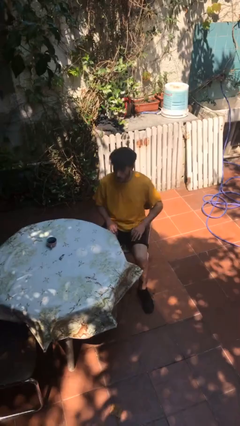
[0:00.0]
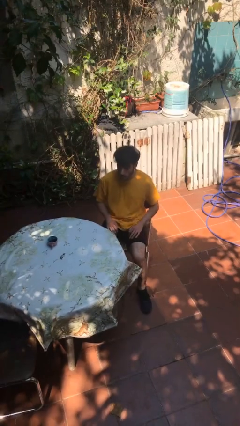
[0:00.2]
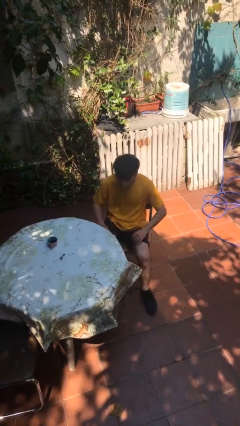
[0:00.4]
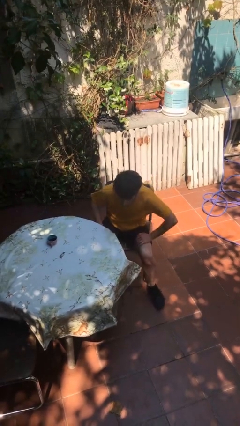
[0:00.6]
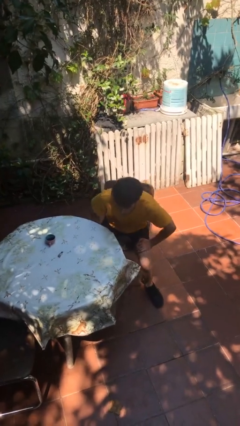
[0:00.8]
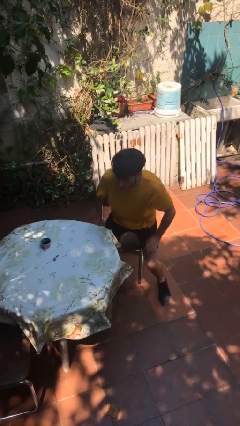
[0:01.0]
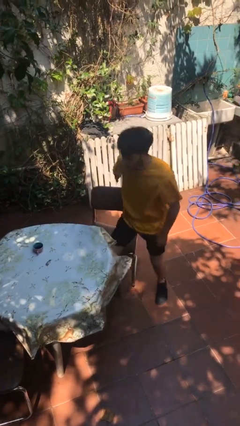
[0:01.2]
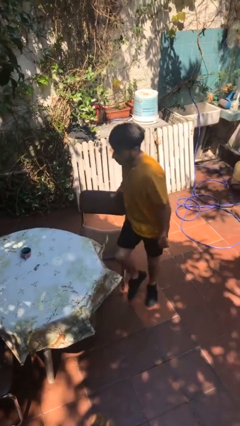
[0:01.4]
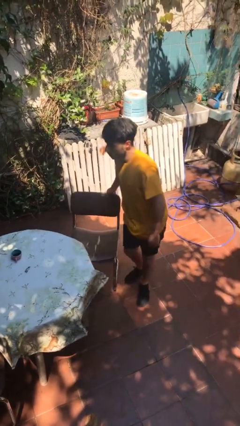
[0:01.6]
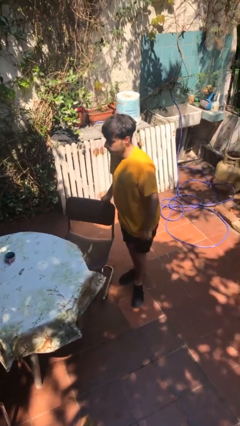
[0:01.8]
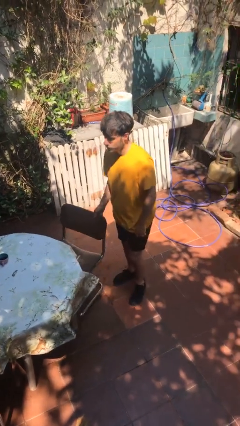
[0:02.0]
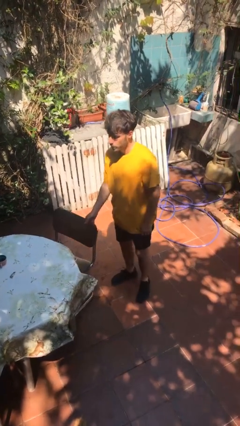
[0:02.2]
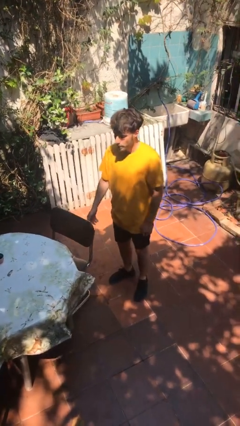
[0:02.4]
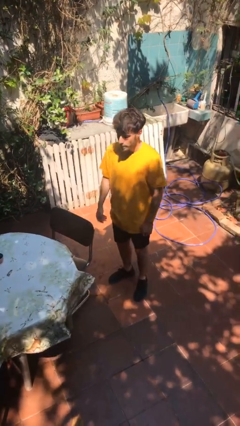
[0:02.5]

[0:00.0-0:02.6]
person stands up

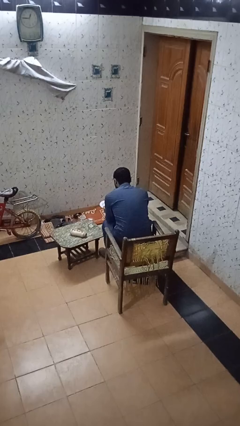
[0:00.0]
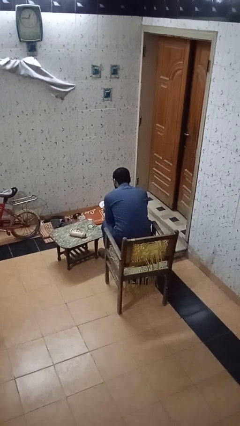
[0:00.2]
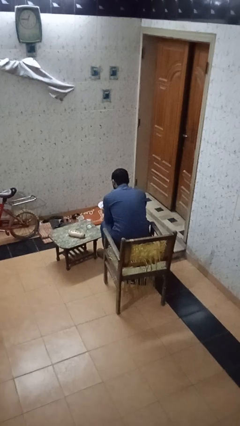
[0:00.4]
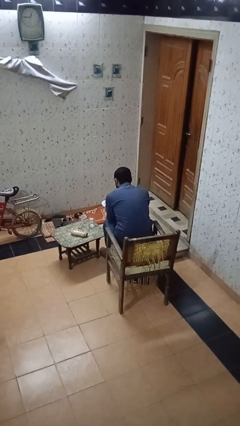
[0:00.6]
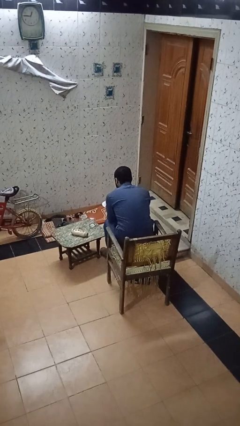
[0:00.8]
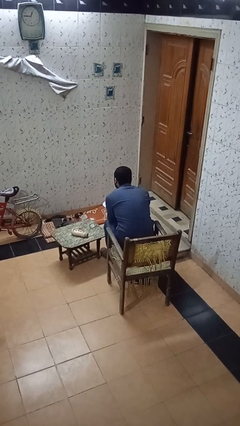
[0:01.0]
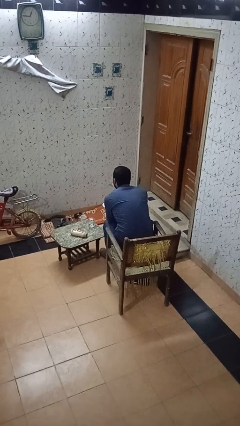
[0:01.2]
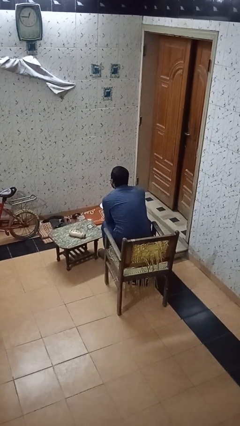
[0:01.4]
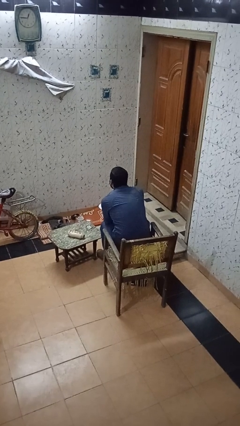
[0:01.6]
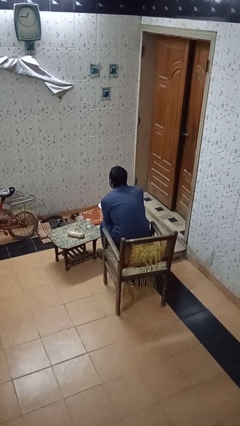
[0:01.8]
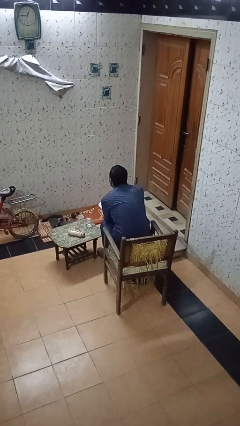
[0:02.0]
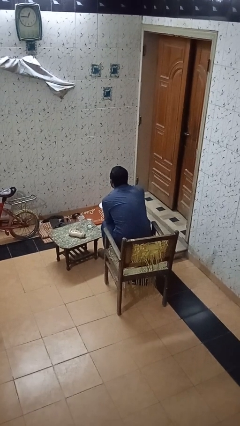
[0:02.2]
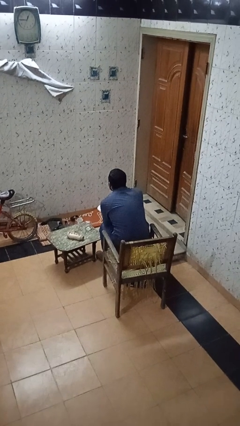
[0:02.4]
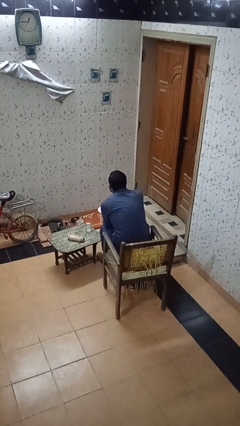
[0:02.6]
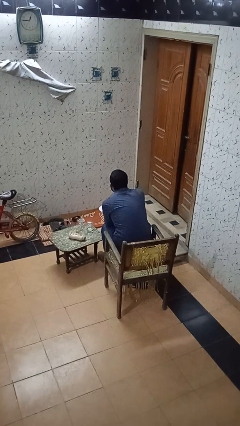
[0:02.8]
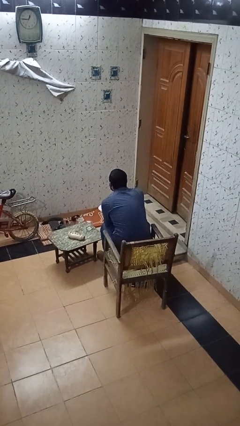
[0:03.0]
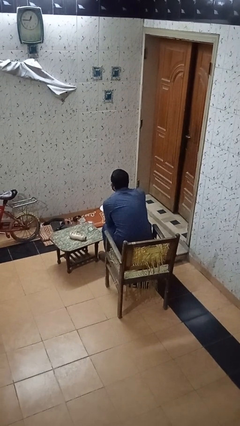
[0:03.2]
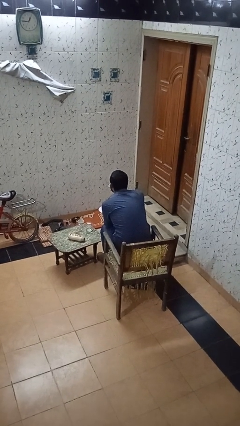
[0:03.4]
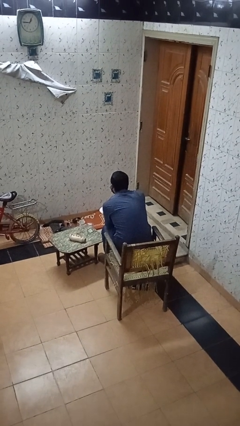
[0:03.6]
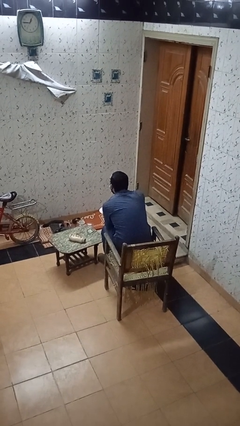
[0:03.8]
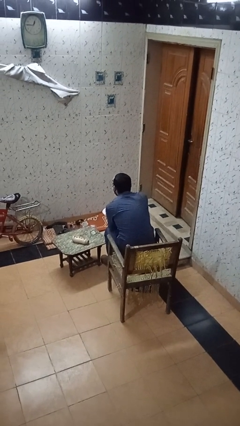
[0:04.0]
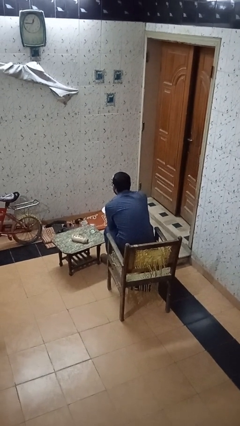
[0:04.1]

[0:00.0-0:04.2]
person eats with utensil

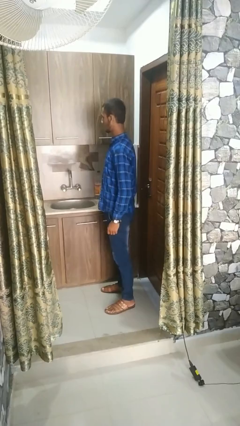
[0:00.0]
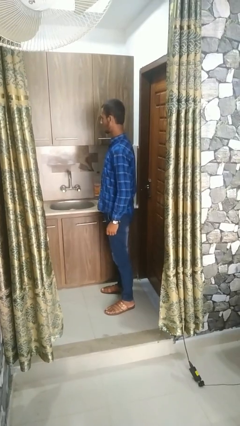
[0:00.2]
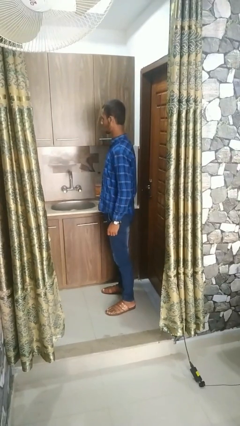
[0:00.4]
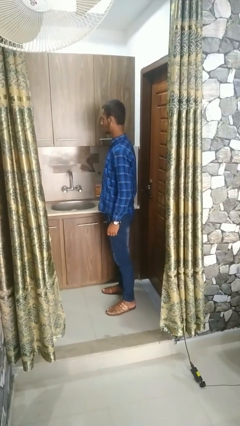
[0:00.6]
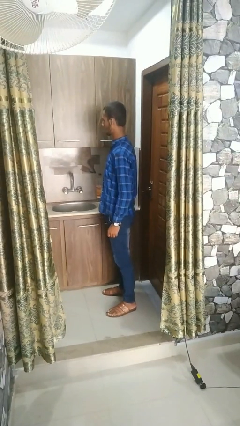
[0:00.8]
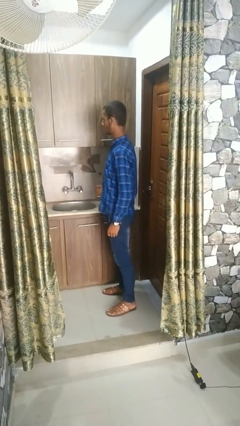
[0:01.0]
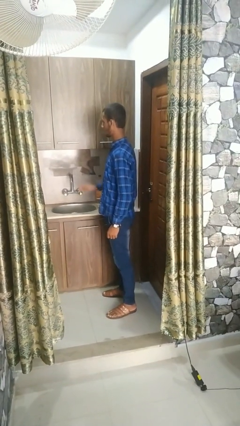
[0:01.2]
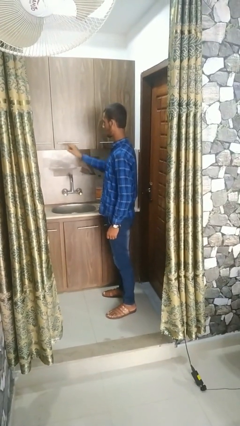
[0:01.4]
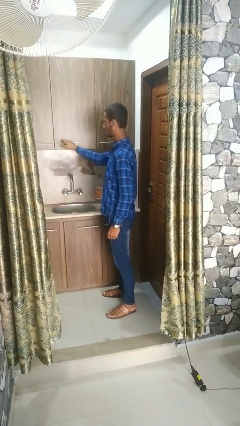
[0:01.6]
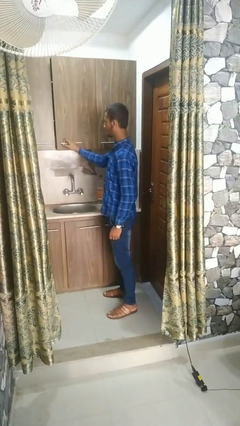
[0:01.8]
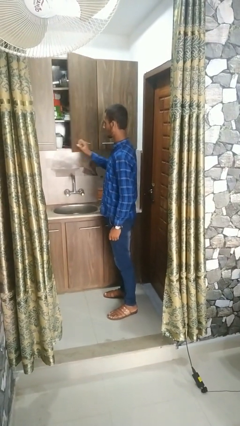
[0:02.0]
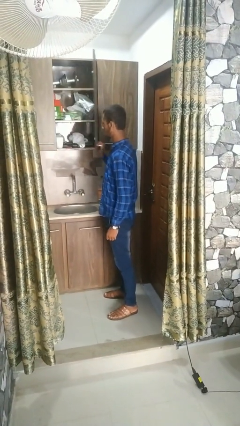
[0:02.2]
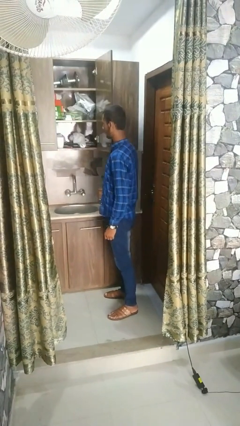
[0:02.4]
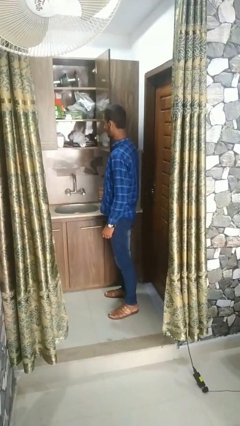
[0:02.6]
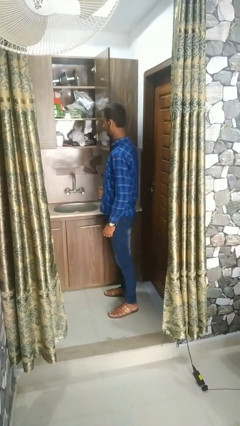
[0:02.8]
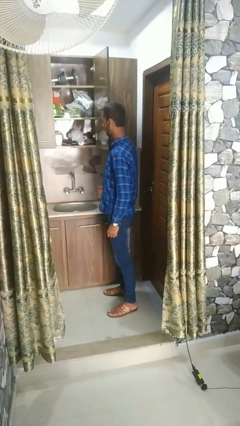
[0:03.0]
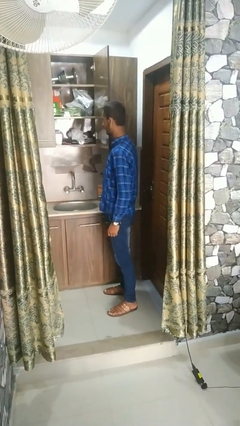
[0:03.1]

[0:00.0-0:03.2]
person opens cabinet

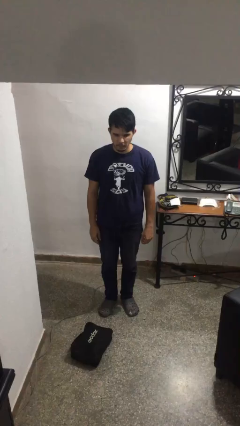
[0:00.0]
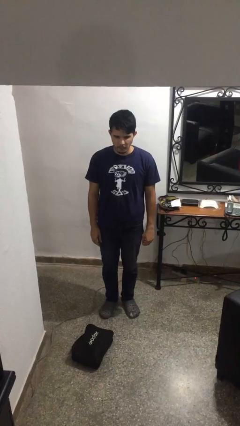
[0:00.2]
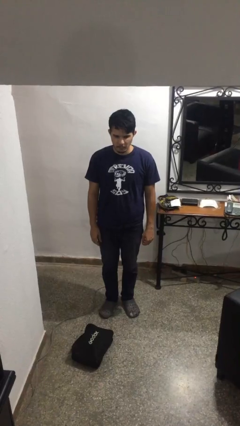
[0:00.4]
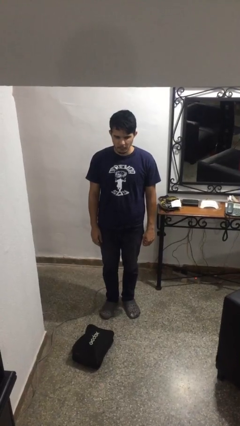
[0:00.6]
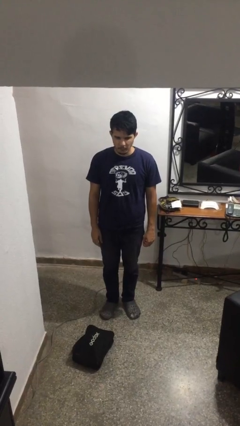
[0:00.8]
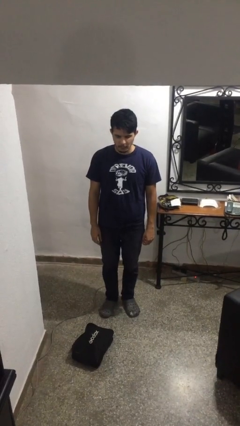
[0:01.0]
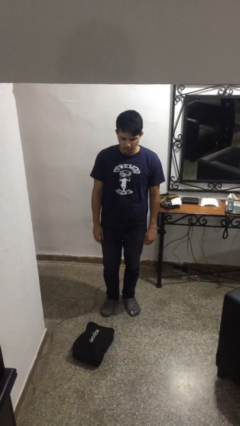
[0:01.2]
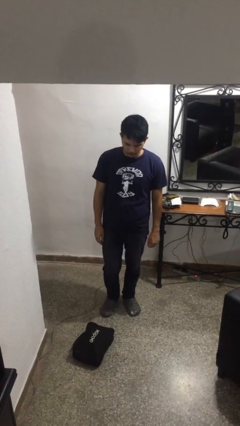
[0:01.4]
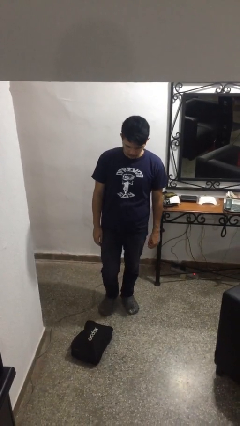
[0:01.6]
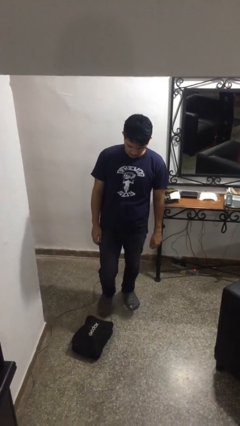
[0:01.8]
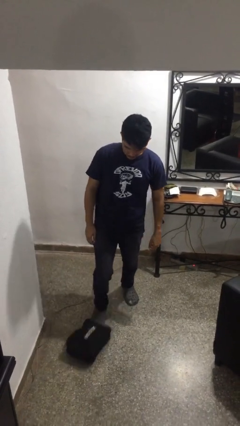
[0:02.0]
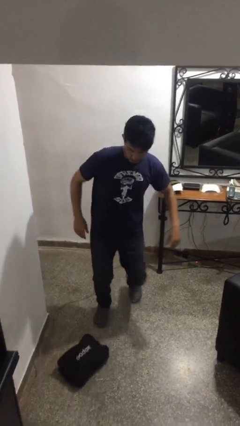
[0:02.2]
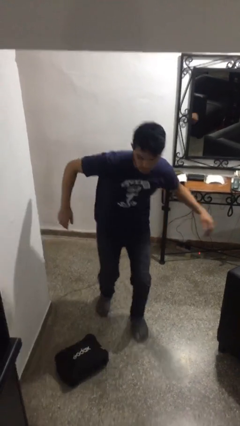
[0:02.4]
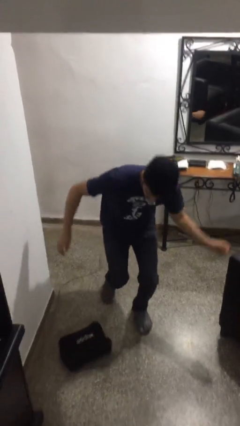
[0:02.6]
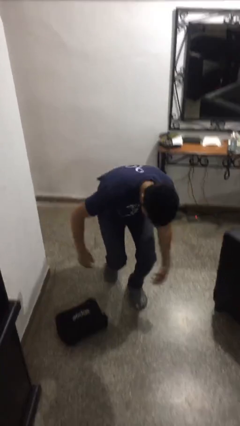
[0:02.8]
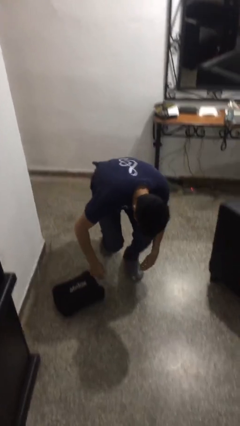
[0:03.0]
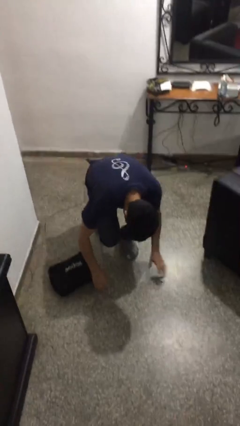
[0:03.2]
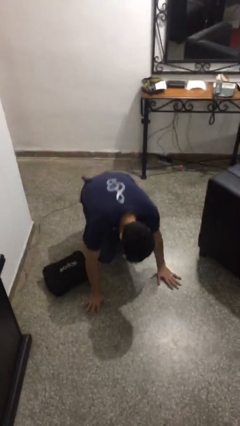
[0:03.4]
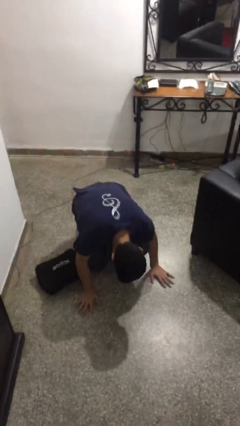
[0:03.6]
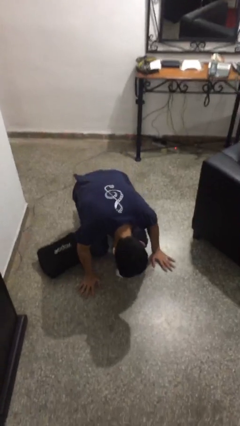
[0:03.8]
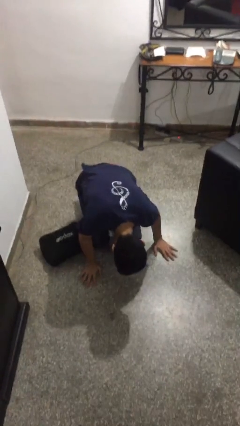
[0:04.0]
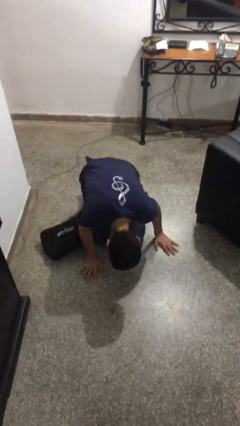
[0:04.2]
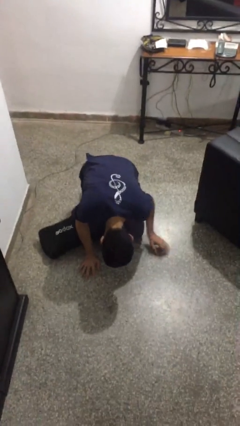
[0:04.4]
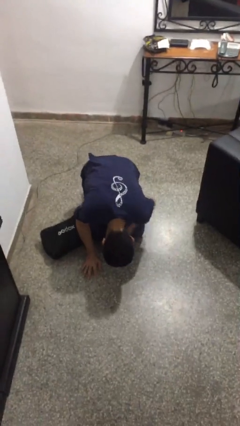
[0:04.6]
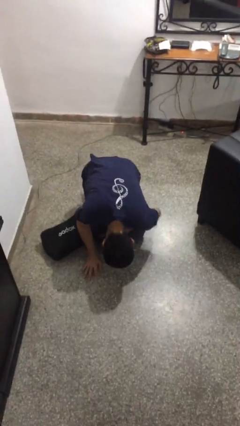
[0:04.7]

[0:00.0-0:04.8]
person trips on object on floor

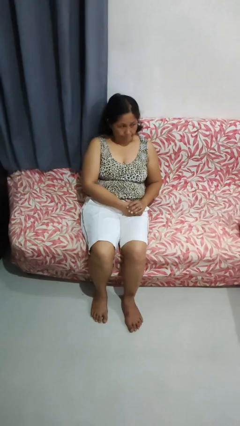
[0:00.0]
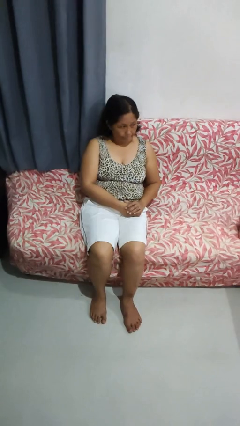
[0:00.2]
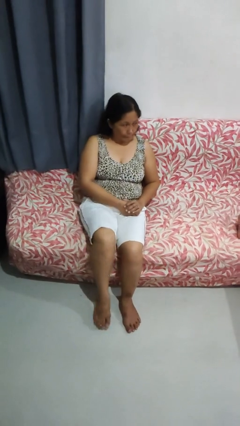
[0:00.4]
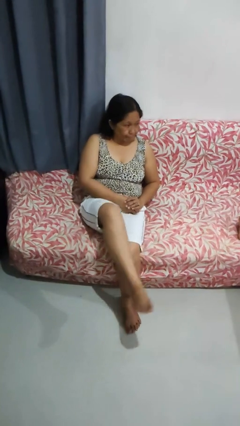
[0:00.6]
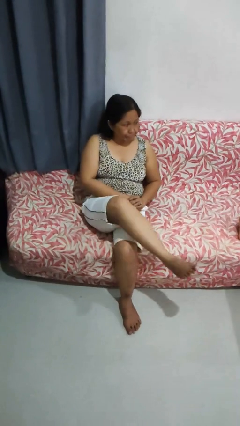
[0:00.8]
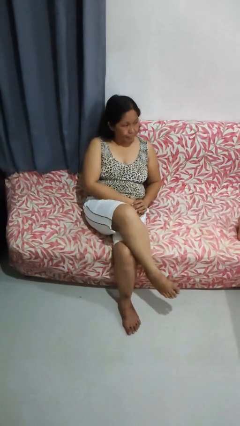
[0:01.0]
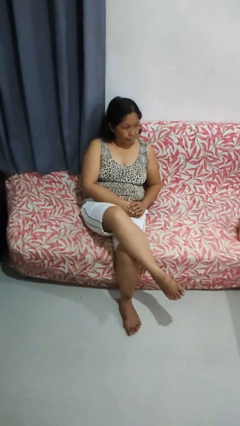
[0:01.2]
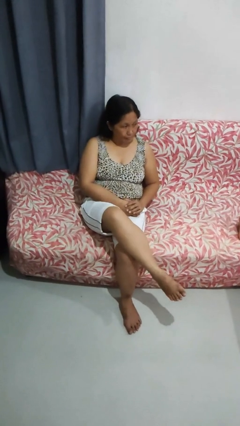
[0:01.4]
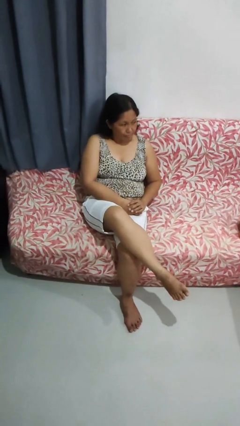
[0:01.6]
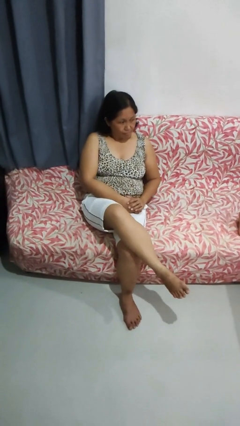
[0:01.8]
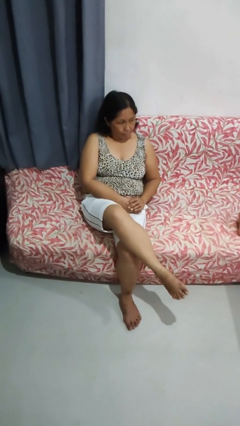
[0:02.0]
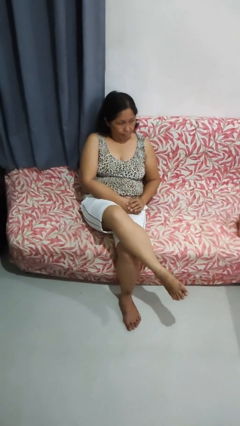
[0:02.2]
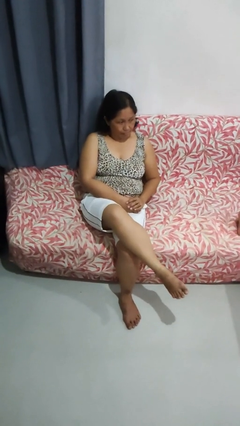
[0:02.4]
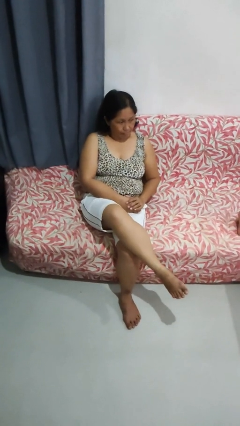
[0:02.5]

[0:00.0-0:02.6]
person crosses legs

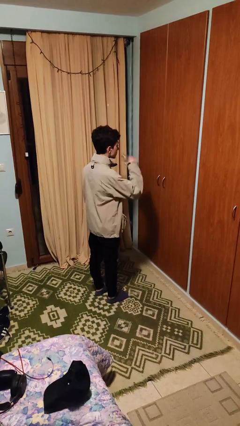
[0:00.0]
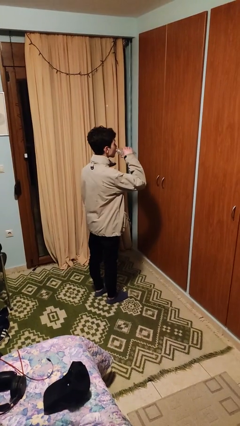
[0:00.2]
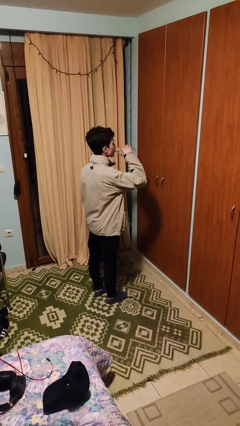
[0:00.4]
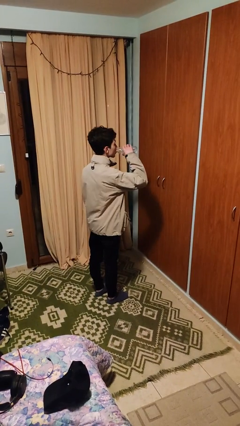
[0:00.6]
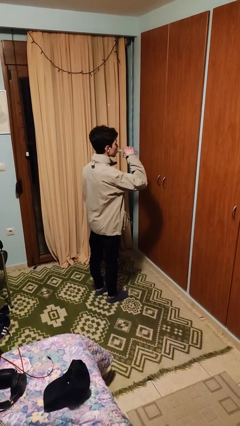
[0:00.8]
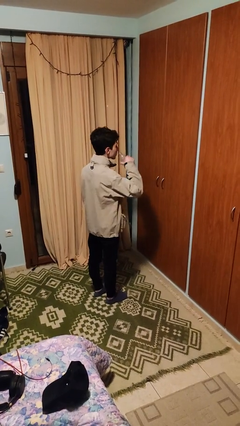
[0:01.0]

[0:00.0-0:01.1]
person drinks from bottle
